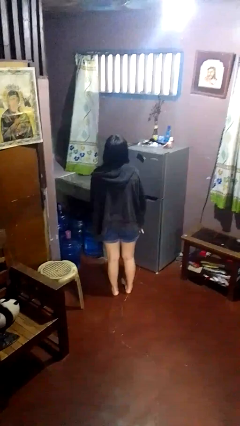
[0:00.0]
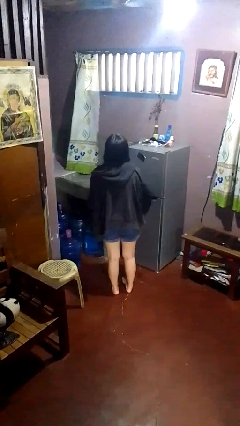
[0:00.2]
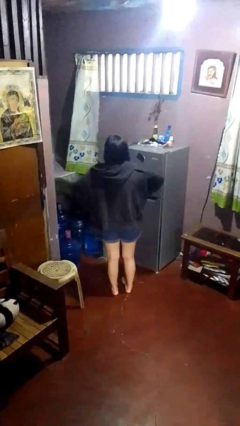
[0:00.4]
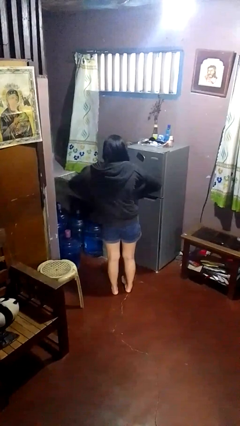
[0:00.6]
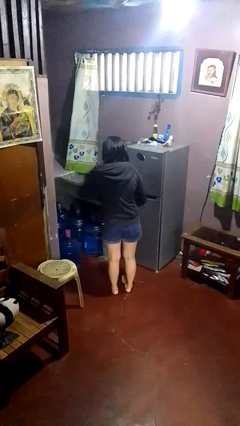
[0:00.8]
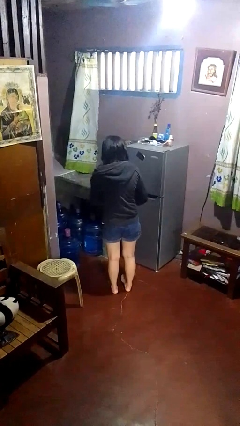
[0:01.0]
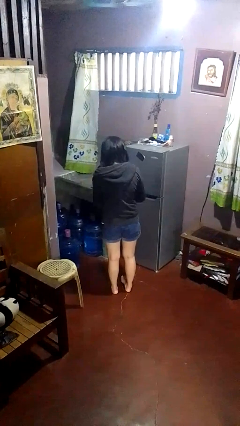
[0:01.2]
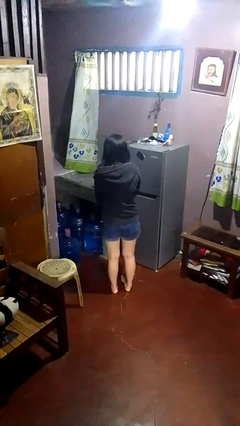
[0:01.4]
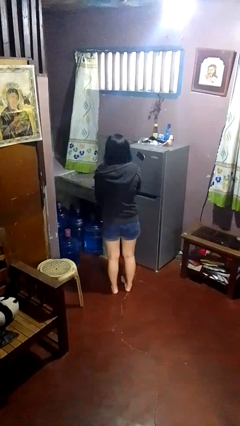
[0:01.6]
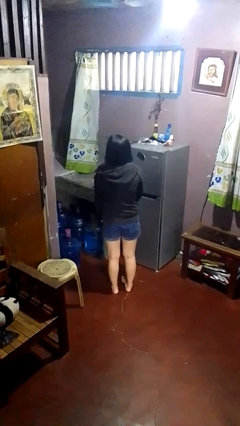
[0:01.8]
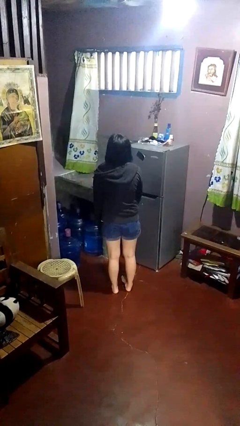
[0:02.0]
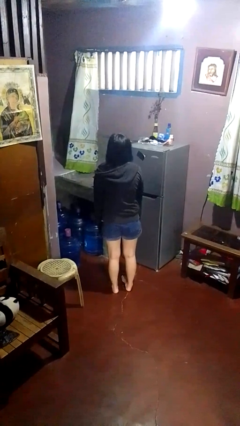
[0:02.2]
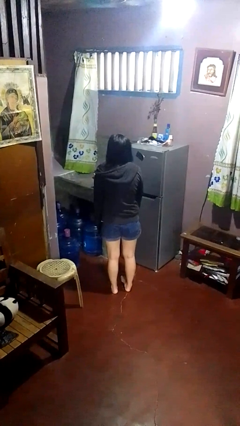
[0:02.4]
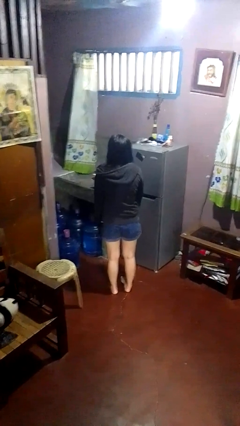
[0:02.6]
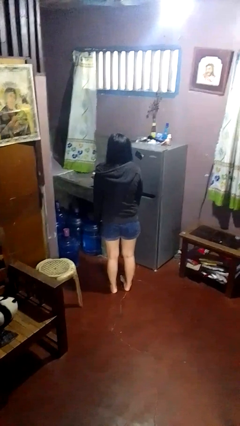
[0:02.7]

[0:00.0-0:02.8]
person zips up jacket

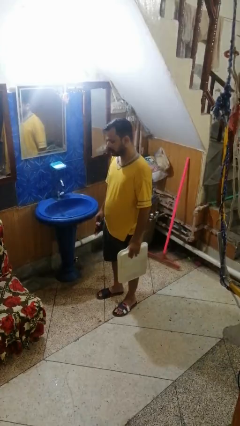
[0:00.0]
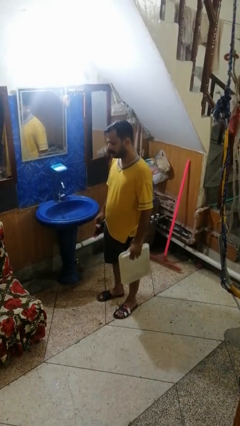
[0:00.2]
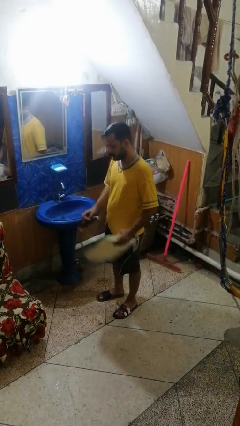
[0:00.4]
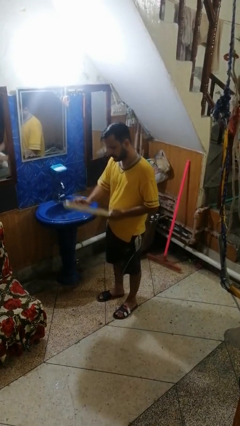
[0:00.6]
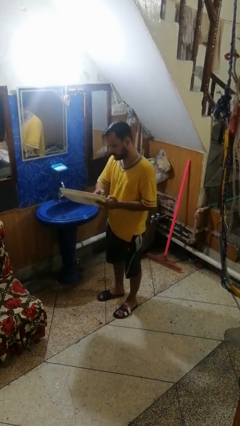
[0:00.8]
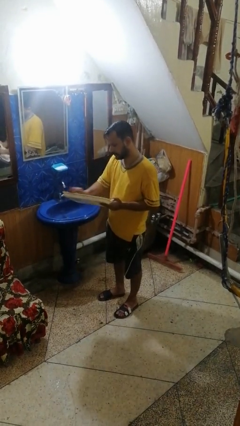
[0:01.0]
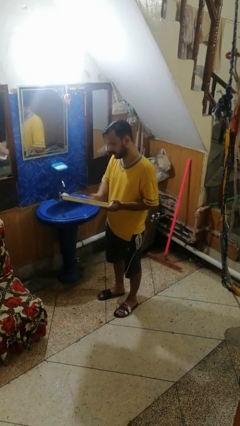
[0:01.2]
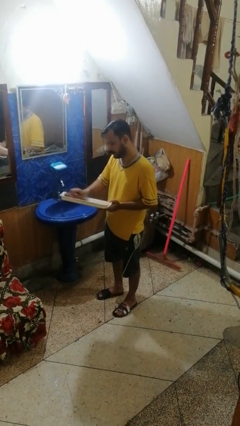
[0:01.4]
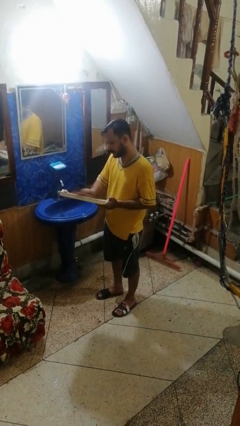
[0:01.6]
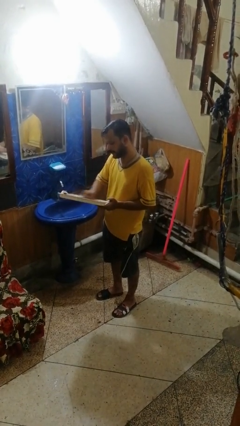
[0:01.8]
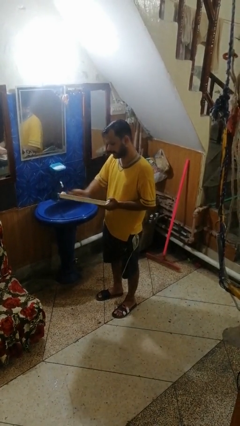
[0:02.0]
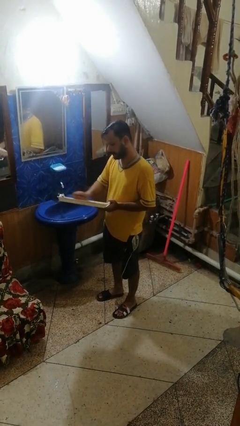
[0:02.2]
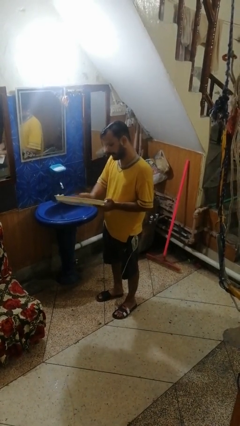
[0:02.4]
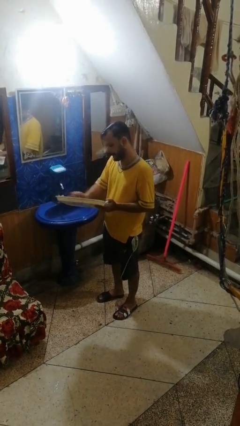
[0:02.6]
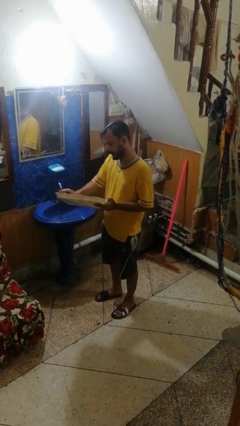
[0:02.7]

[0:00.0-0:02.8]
person dries dish

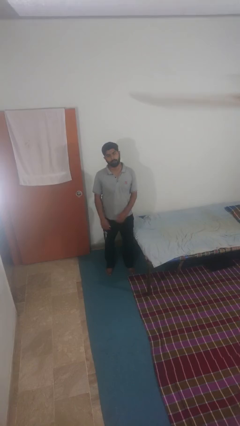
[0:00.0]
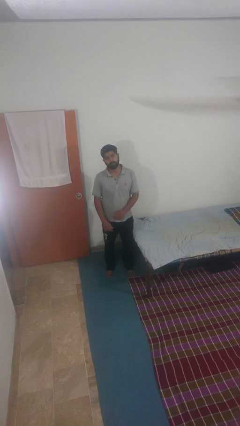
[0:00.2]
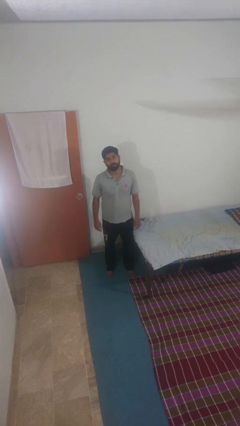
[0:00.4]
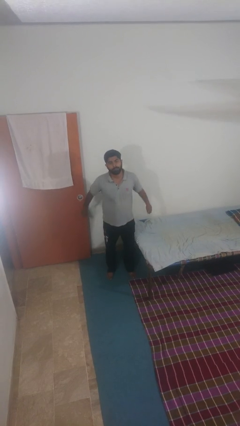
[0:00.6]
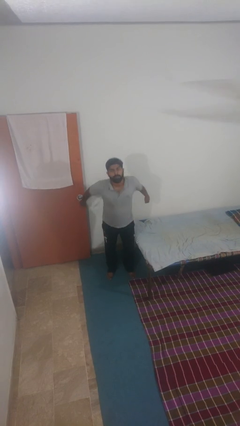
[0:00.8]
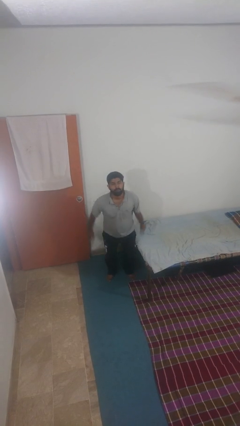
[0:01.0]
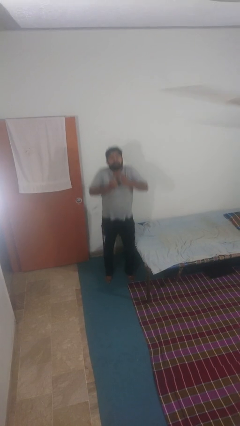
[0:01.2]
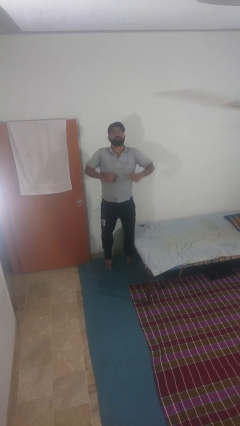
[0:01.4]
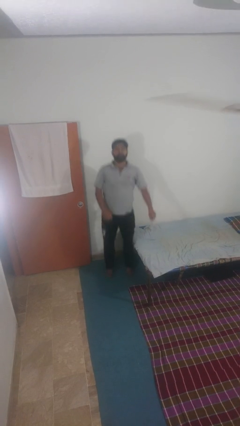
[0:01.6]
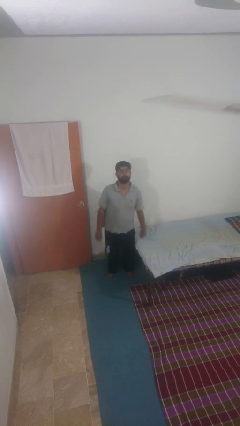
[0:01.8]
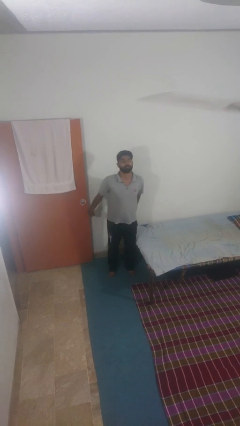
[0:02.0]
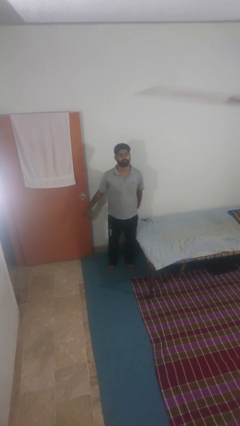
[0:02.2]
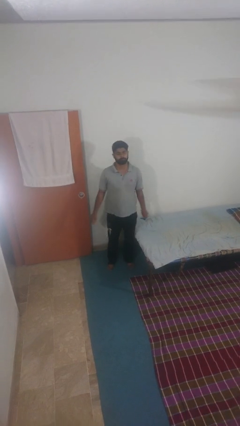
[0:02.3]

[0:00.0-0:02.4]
person jumps

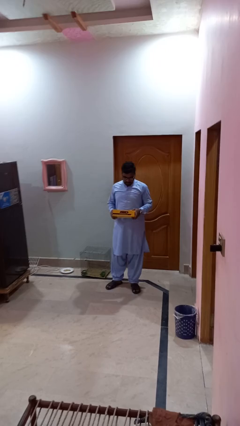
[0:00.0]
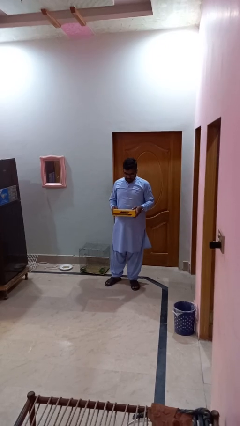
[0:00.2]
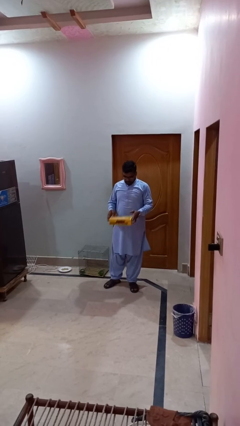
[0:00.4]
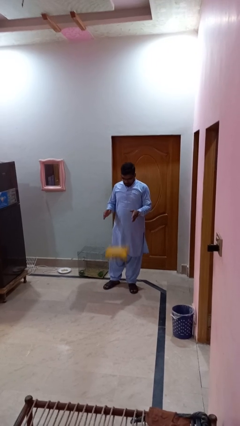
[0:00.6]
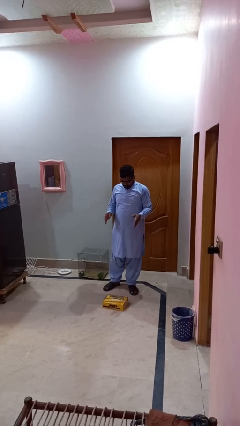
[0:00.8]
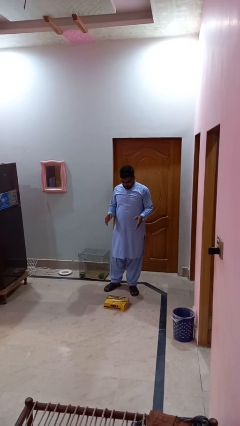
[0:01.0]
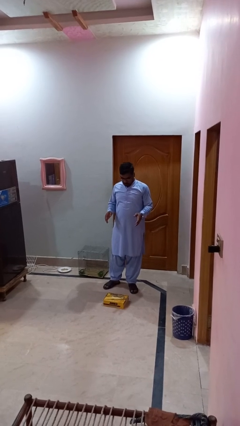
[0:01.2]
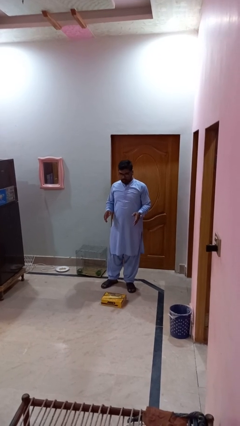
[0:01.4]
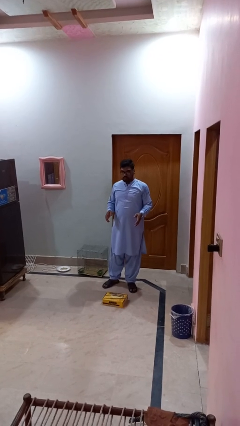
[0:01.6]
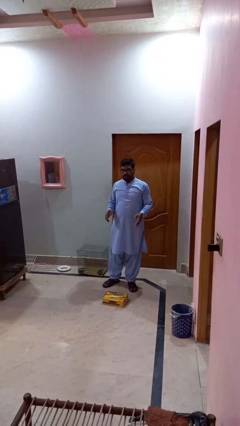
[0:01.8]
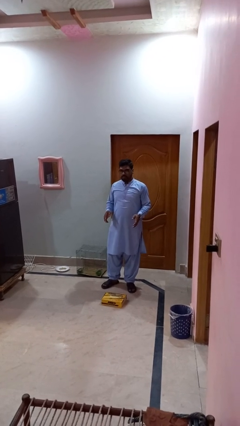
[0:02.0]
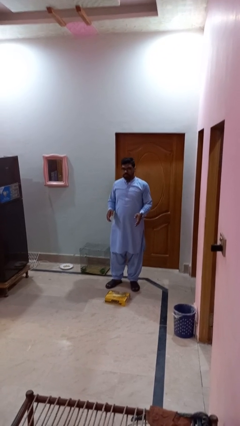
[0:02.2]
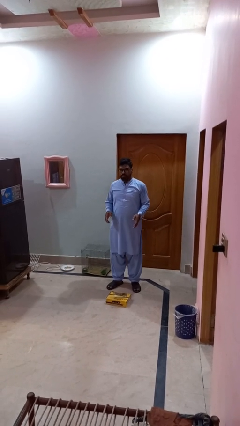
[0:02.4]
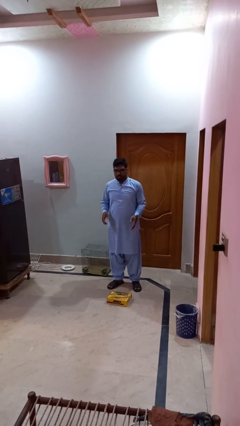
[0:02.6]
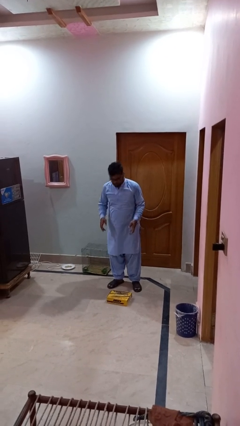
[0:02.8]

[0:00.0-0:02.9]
person drops object

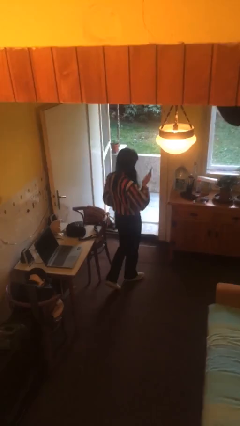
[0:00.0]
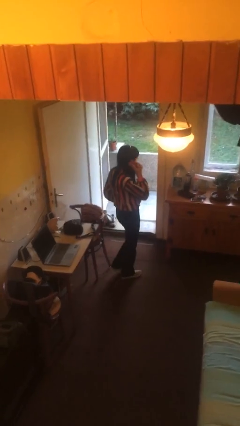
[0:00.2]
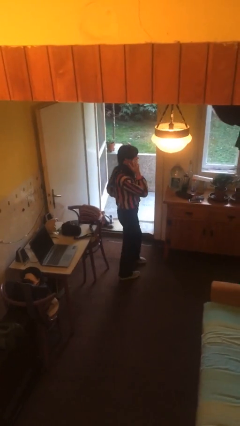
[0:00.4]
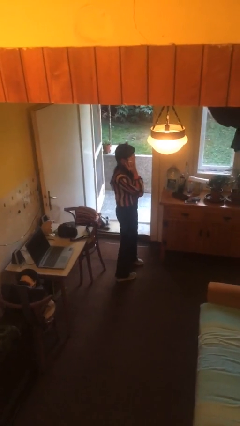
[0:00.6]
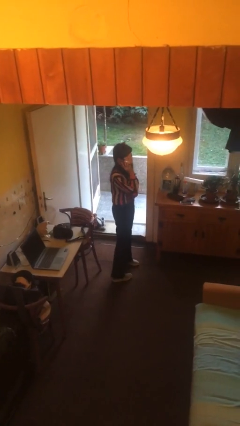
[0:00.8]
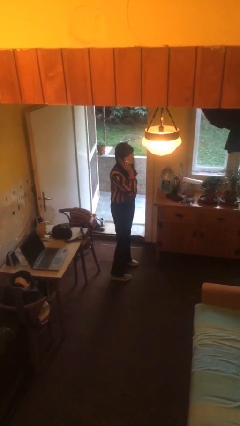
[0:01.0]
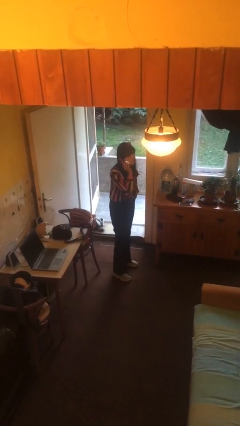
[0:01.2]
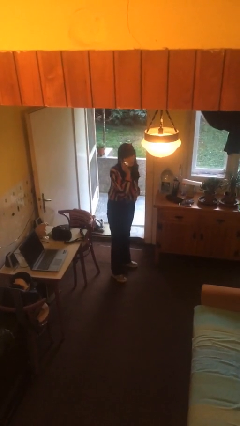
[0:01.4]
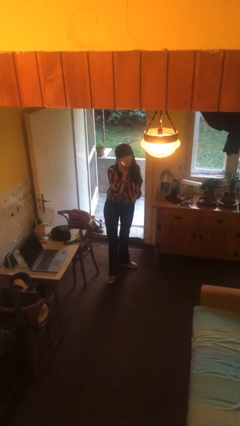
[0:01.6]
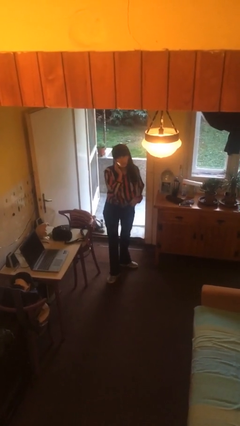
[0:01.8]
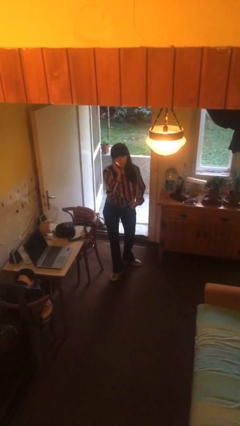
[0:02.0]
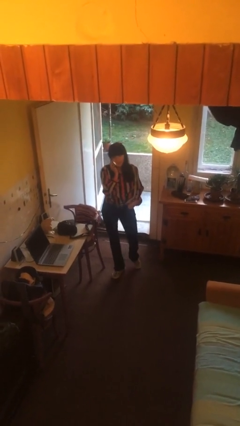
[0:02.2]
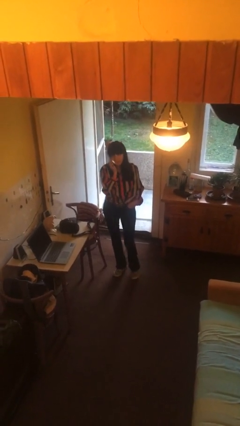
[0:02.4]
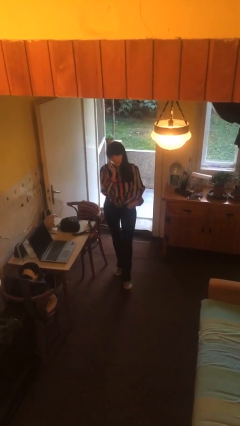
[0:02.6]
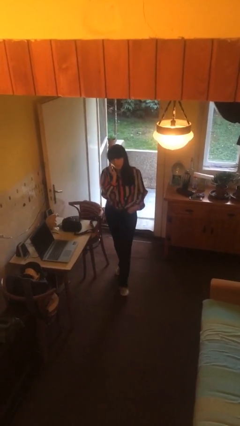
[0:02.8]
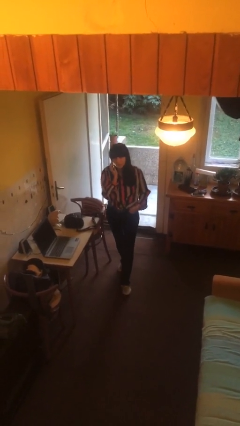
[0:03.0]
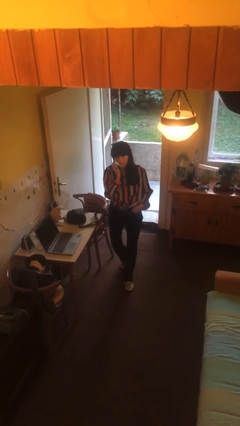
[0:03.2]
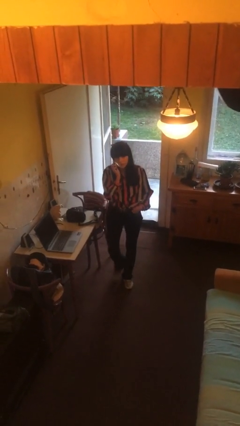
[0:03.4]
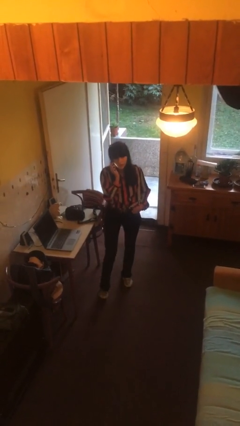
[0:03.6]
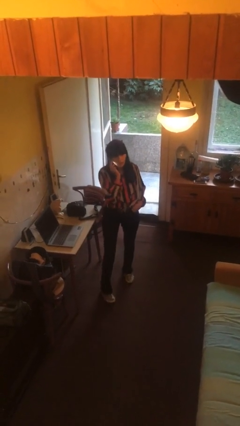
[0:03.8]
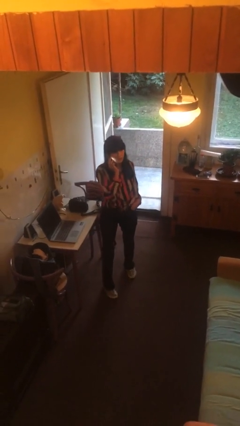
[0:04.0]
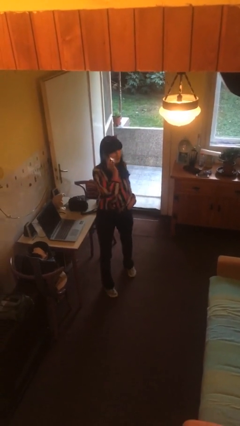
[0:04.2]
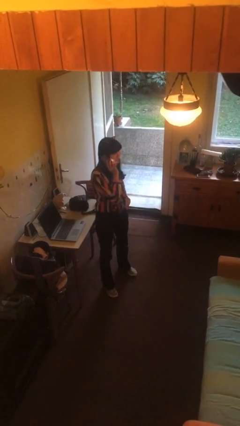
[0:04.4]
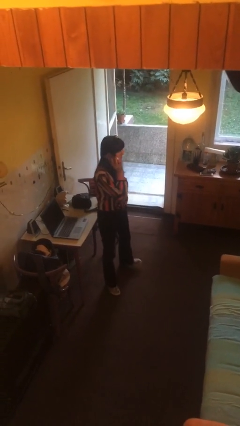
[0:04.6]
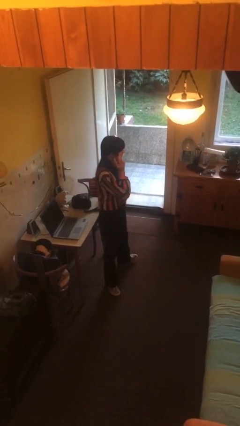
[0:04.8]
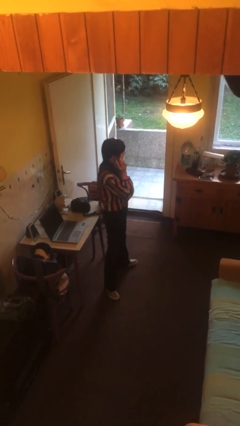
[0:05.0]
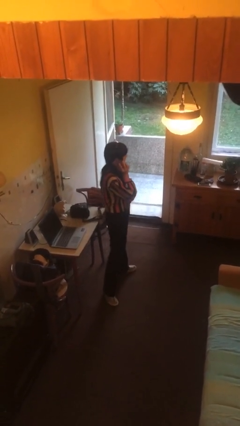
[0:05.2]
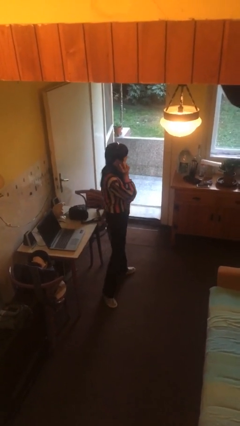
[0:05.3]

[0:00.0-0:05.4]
person talks on phone

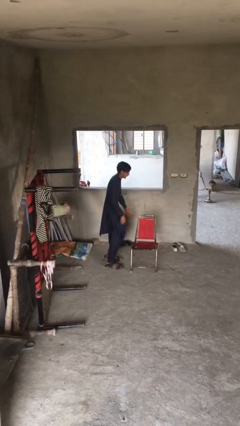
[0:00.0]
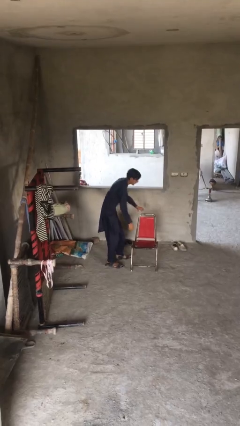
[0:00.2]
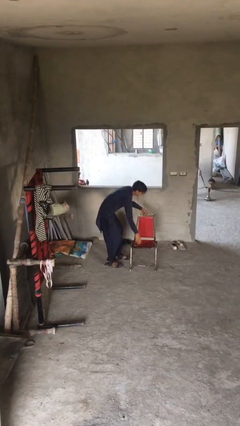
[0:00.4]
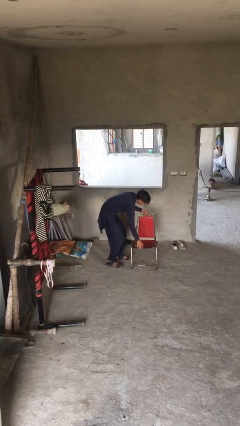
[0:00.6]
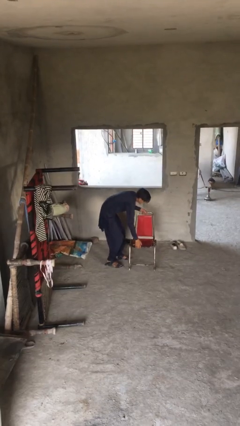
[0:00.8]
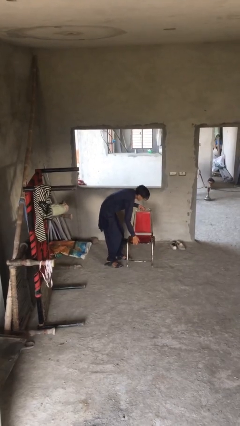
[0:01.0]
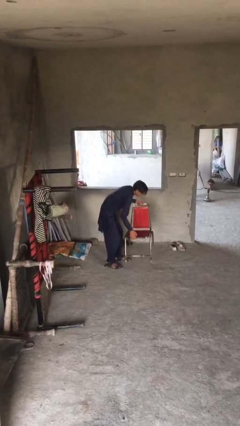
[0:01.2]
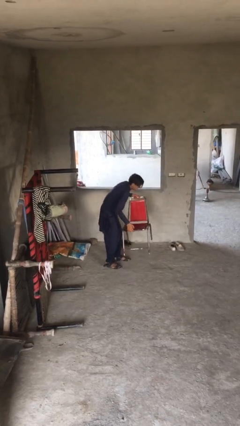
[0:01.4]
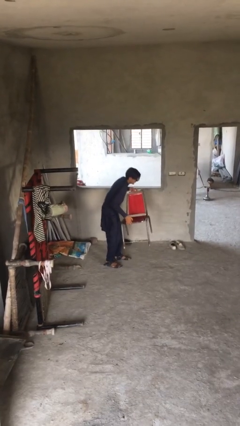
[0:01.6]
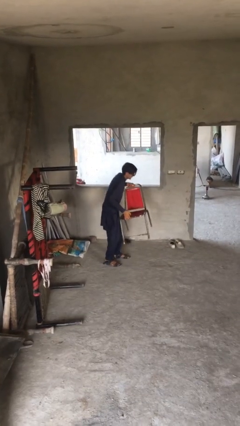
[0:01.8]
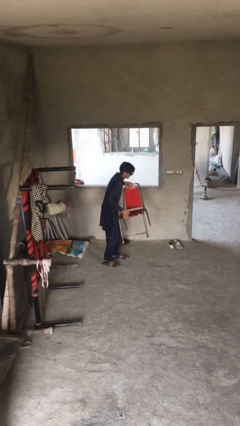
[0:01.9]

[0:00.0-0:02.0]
person picks up object from floor
